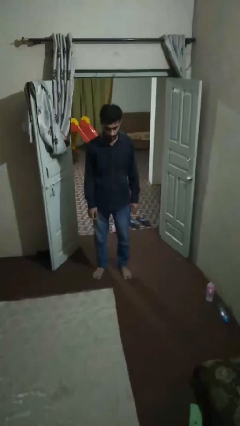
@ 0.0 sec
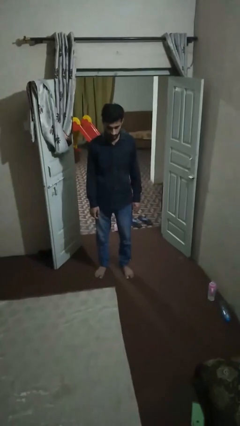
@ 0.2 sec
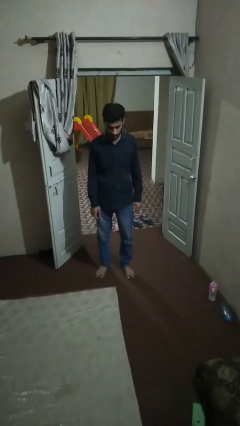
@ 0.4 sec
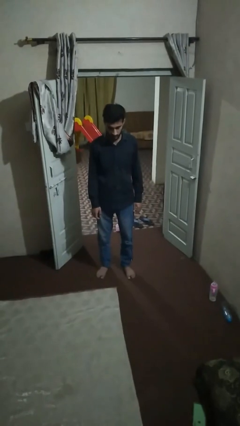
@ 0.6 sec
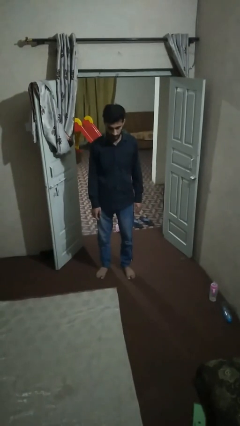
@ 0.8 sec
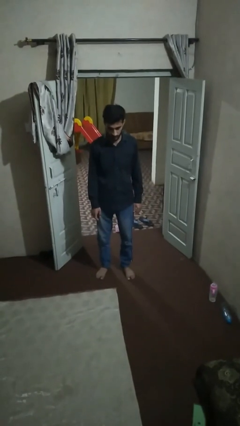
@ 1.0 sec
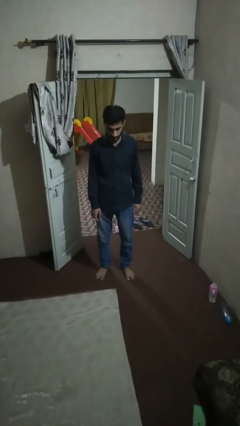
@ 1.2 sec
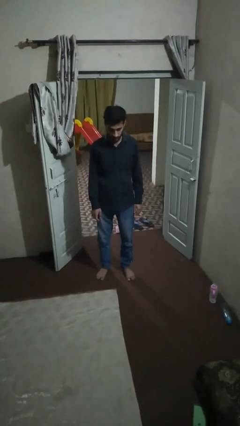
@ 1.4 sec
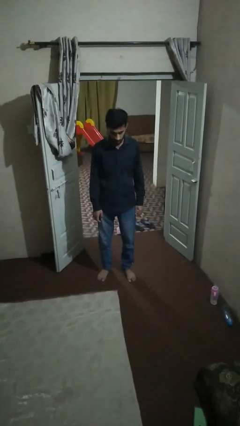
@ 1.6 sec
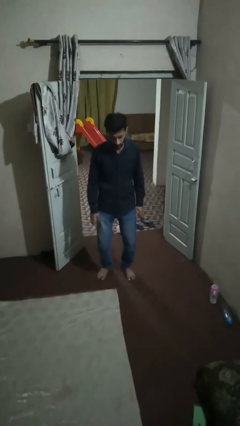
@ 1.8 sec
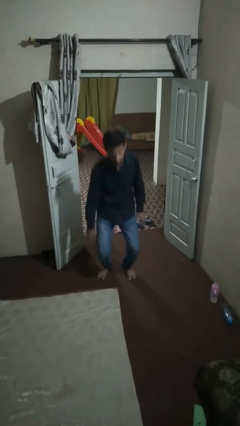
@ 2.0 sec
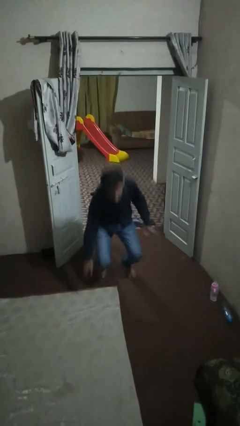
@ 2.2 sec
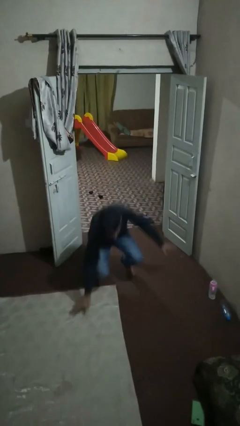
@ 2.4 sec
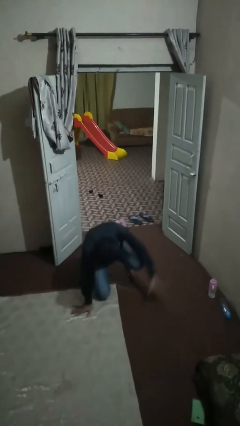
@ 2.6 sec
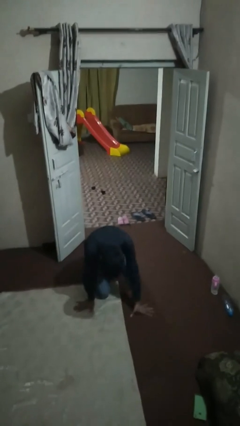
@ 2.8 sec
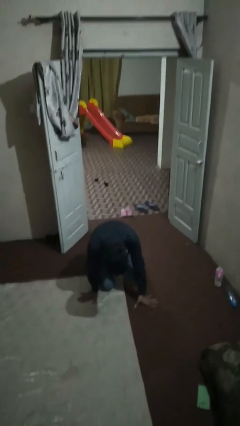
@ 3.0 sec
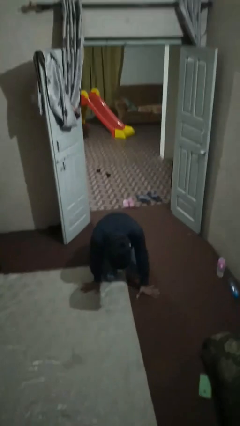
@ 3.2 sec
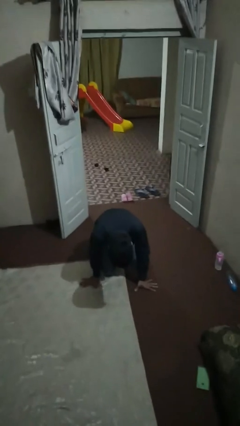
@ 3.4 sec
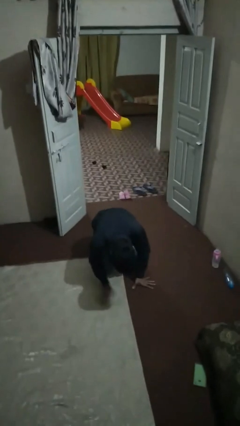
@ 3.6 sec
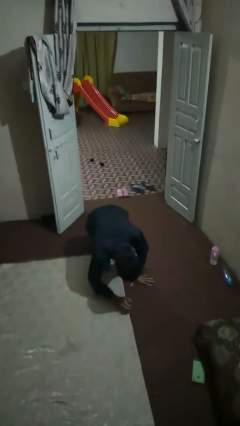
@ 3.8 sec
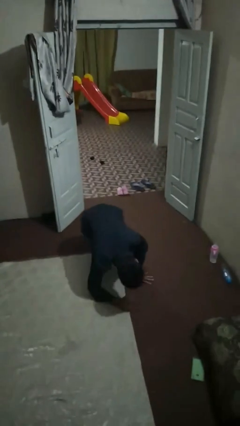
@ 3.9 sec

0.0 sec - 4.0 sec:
person trips on object on floor

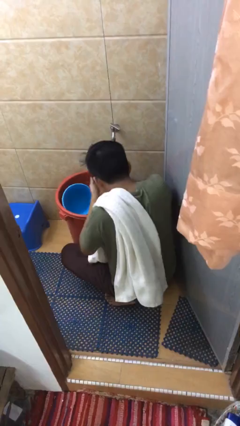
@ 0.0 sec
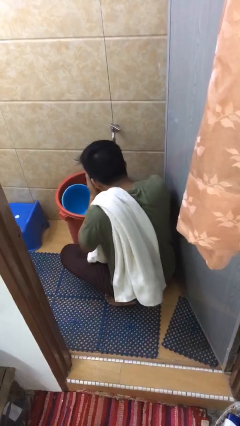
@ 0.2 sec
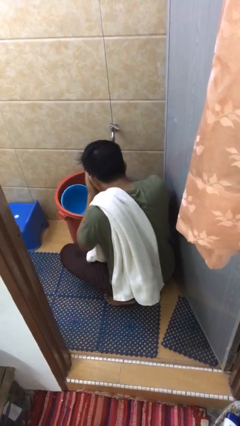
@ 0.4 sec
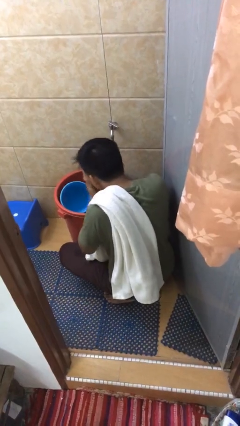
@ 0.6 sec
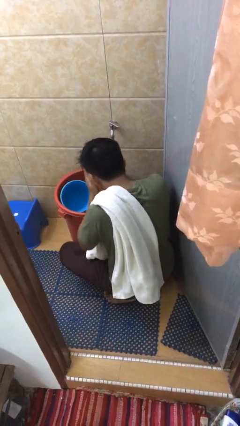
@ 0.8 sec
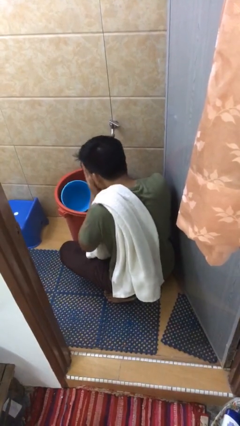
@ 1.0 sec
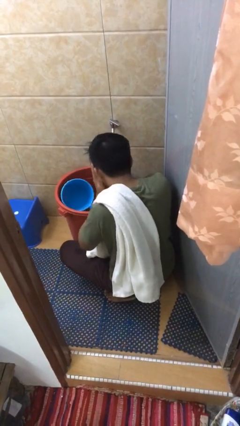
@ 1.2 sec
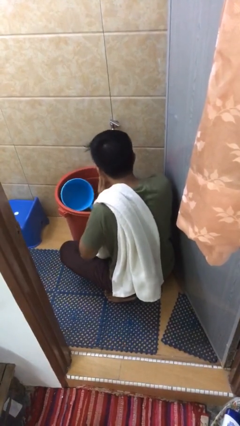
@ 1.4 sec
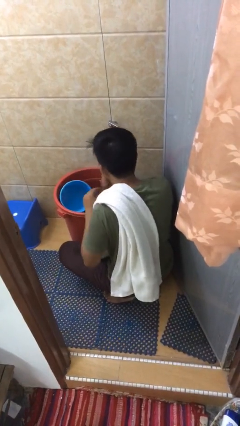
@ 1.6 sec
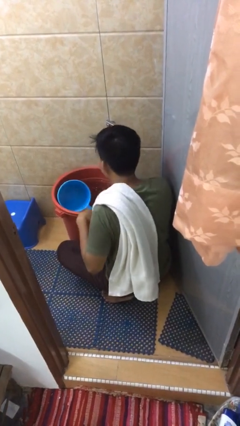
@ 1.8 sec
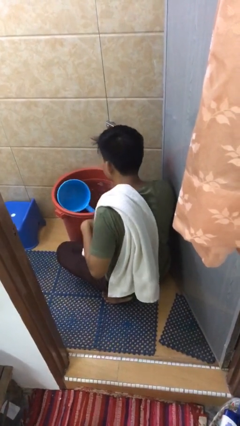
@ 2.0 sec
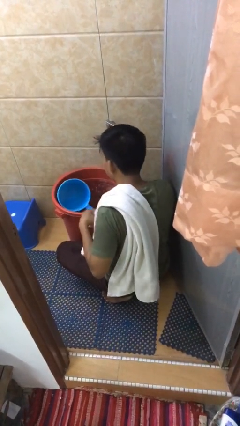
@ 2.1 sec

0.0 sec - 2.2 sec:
person washes face

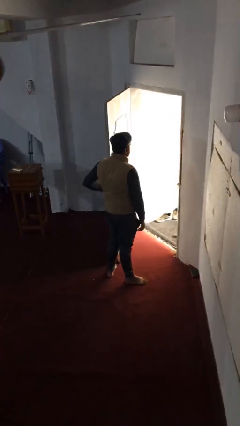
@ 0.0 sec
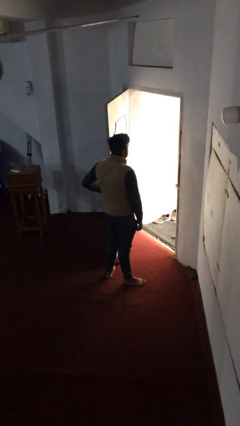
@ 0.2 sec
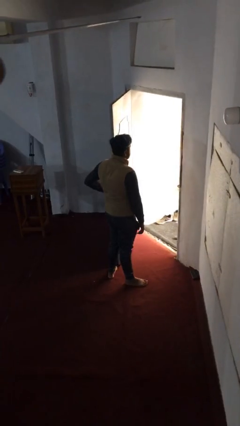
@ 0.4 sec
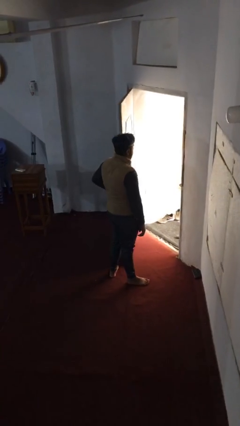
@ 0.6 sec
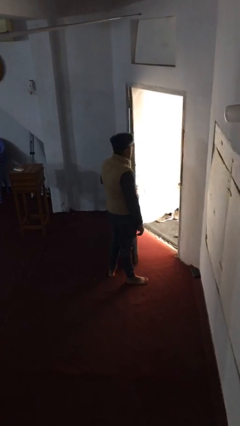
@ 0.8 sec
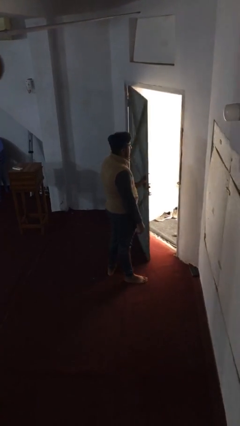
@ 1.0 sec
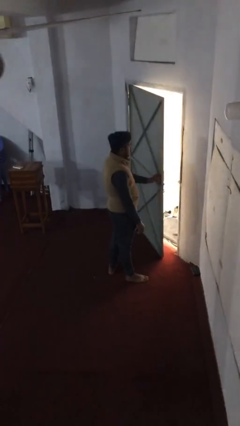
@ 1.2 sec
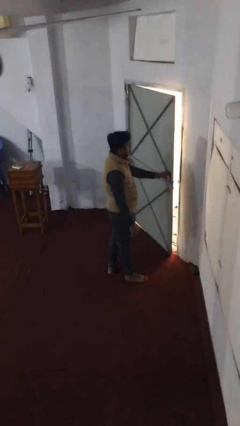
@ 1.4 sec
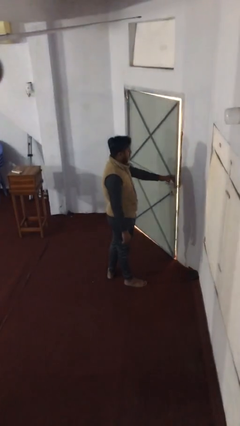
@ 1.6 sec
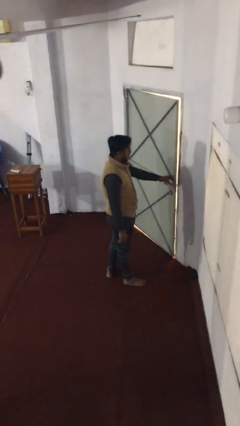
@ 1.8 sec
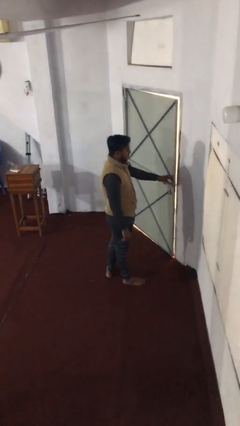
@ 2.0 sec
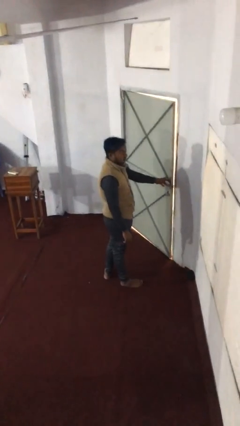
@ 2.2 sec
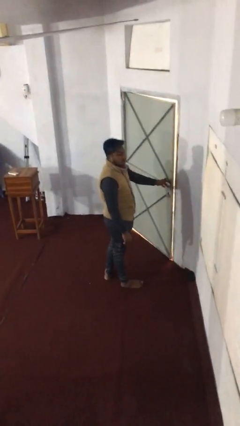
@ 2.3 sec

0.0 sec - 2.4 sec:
person closes facility door

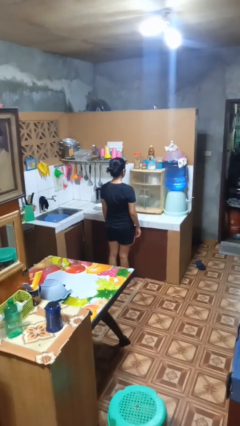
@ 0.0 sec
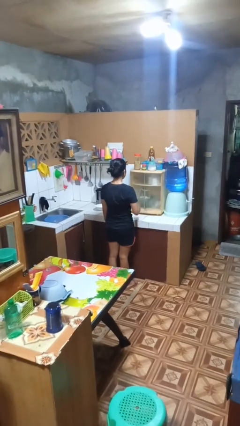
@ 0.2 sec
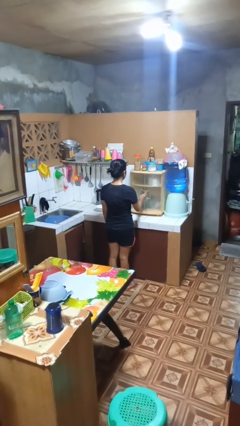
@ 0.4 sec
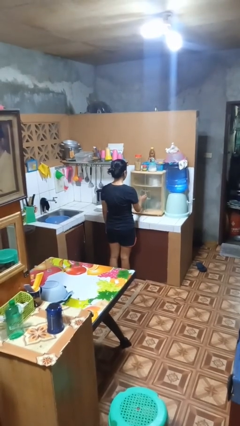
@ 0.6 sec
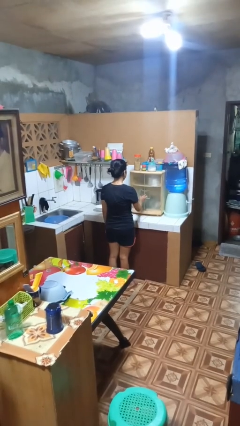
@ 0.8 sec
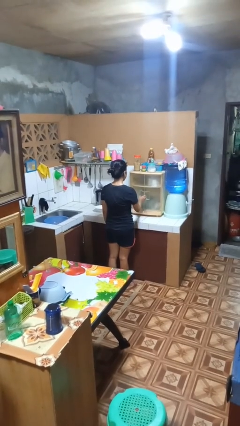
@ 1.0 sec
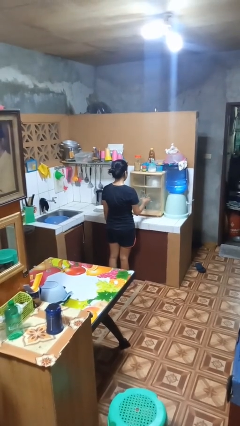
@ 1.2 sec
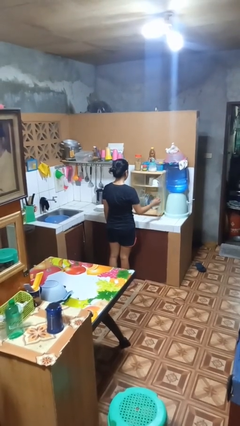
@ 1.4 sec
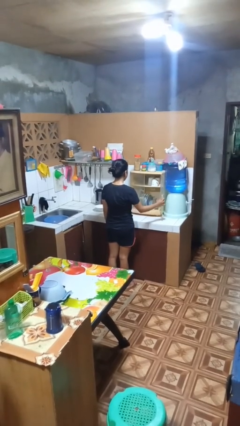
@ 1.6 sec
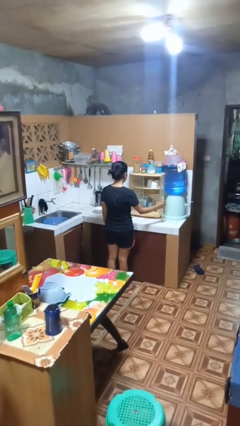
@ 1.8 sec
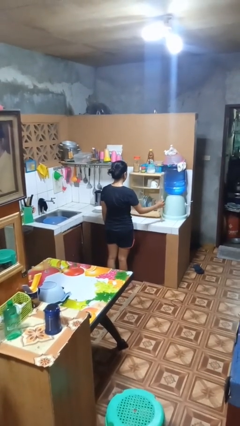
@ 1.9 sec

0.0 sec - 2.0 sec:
person opens kitchen drawer

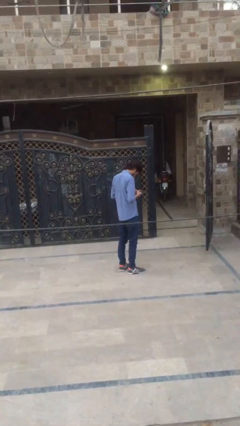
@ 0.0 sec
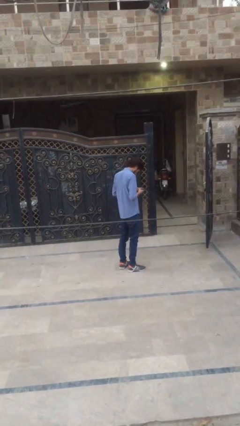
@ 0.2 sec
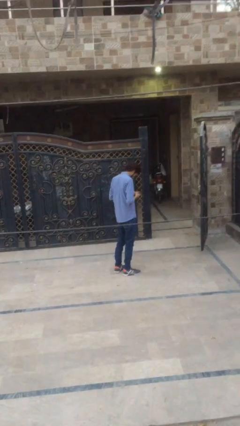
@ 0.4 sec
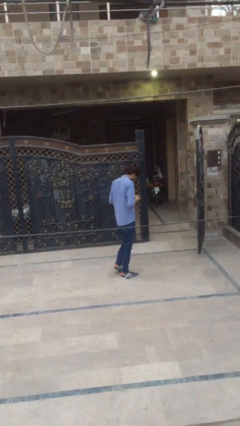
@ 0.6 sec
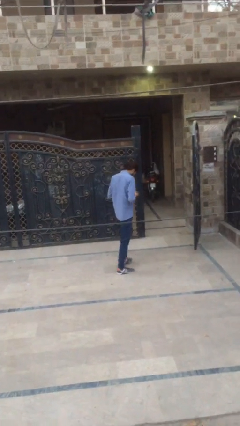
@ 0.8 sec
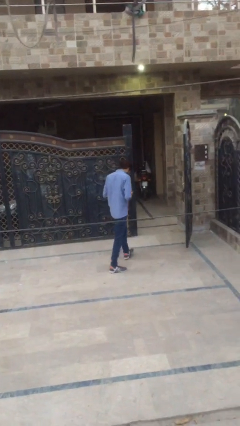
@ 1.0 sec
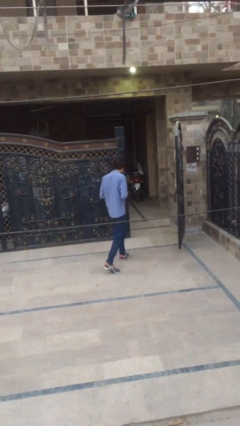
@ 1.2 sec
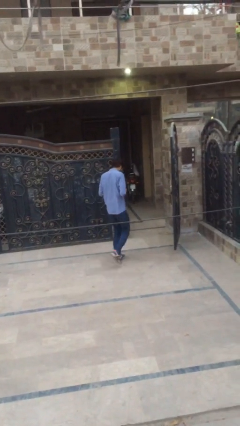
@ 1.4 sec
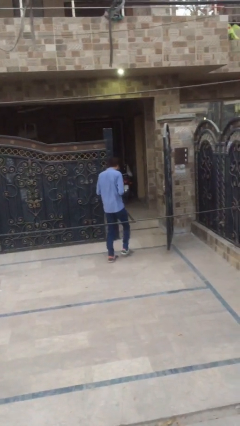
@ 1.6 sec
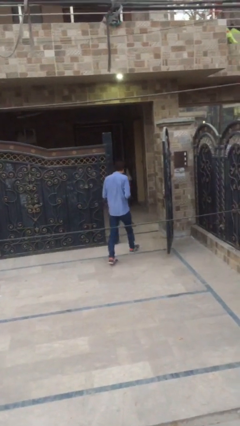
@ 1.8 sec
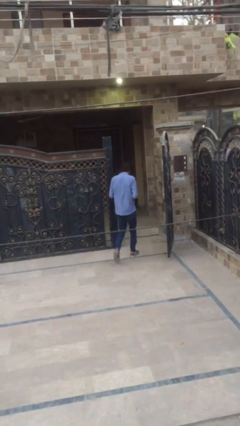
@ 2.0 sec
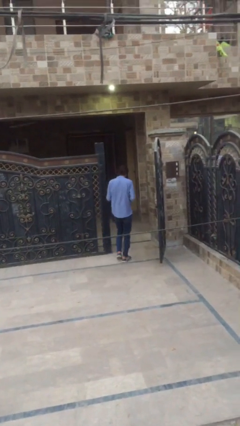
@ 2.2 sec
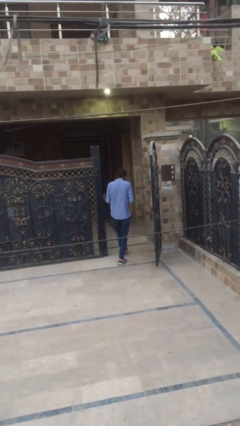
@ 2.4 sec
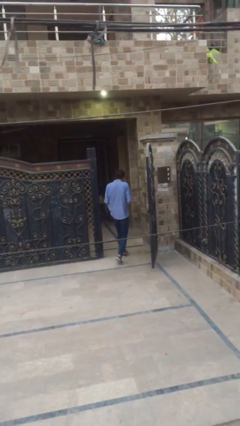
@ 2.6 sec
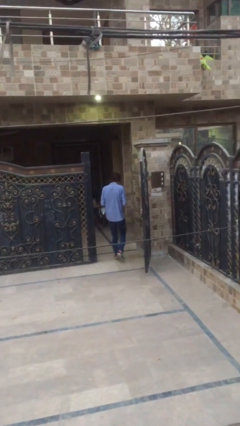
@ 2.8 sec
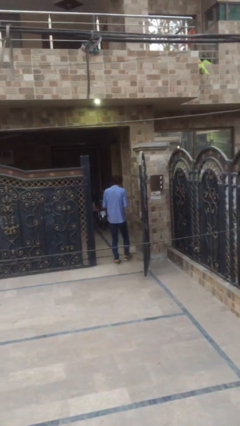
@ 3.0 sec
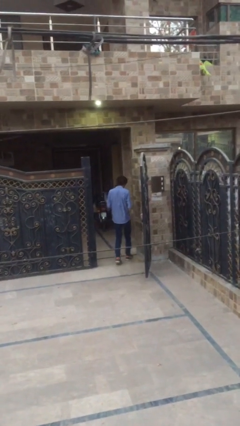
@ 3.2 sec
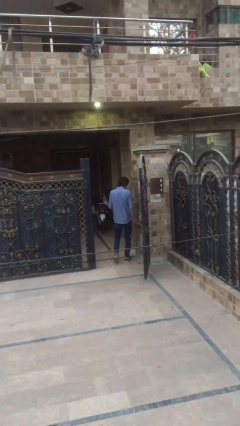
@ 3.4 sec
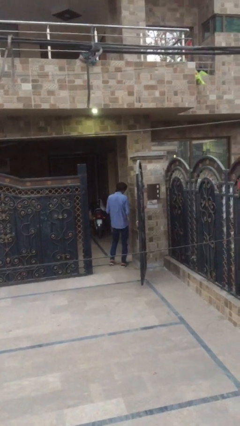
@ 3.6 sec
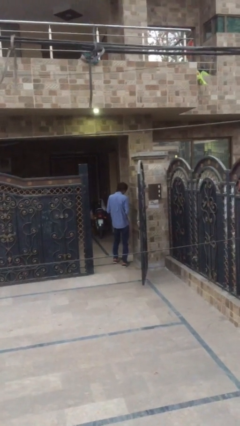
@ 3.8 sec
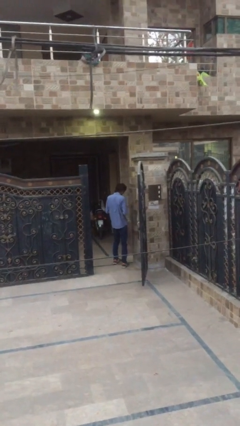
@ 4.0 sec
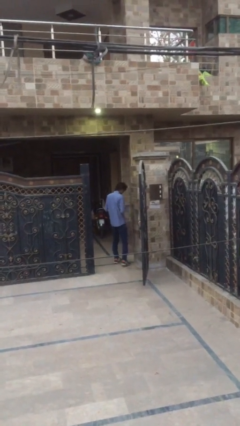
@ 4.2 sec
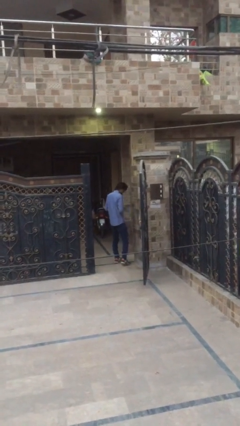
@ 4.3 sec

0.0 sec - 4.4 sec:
person enters scene through structure

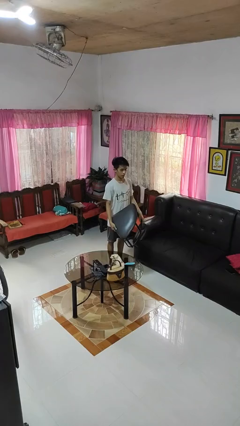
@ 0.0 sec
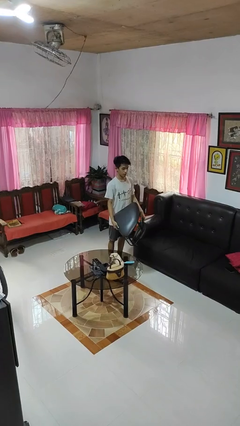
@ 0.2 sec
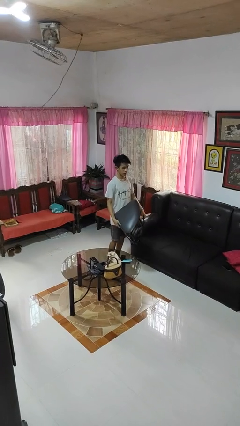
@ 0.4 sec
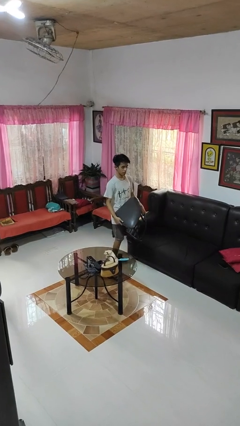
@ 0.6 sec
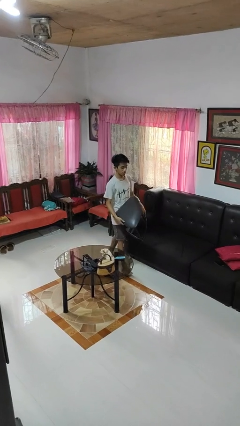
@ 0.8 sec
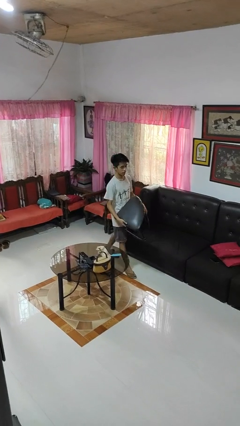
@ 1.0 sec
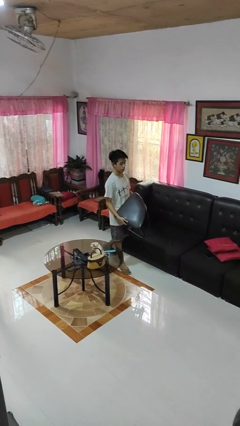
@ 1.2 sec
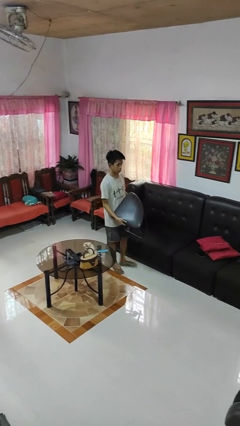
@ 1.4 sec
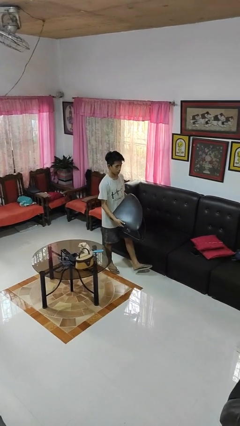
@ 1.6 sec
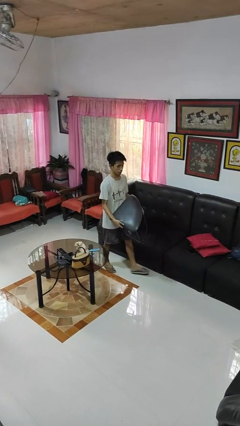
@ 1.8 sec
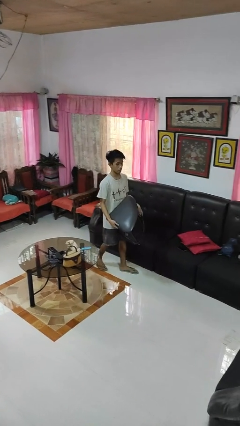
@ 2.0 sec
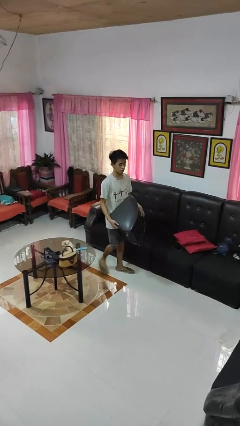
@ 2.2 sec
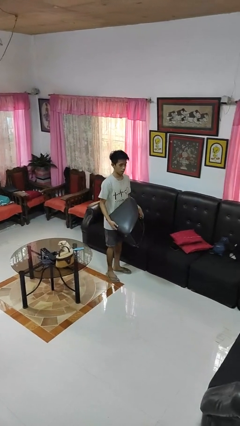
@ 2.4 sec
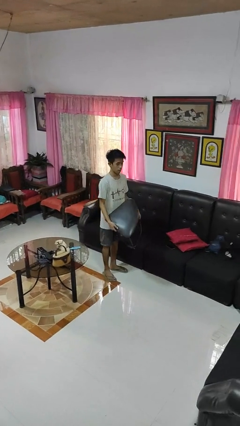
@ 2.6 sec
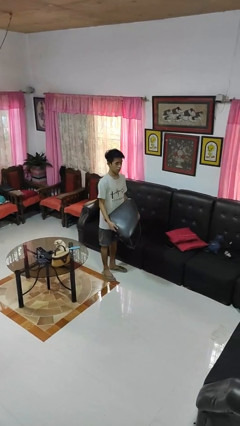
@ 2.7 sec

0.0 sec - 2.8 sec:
person carries furniture
